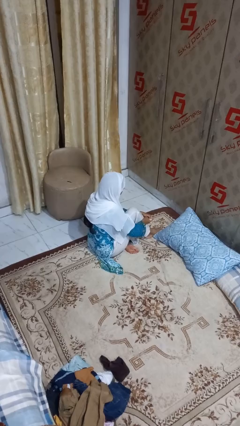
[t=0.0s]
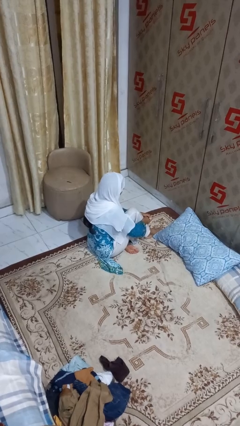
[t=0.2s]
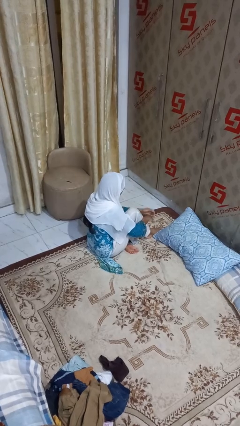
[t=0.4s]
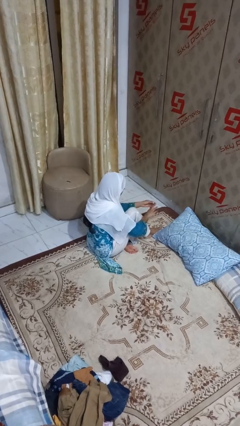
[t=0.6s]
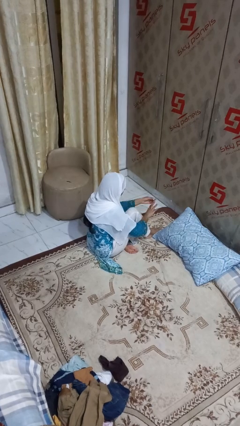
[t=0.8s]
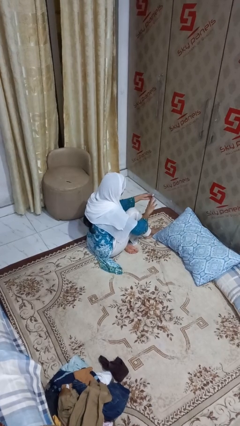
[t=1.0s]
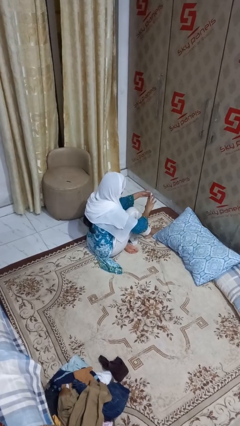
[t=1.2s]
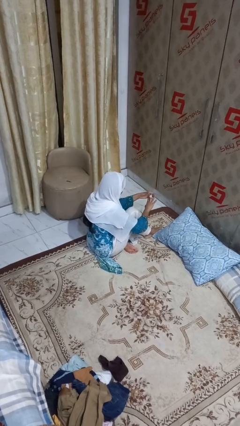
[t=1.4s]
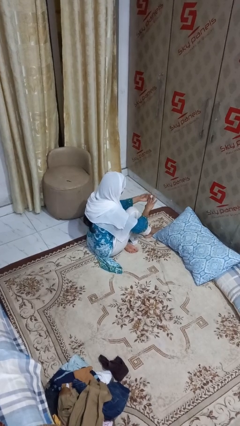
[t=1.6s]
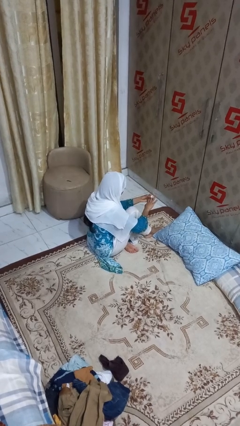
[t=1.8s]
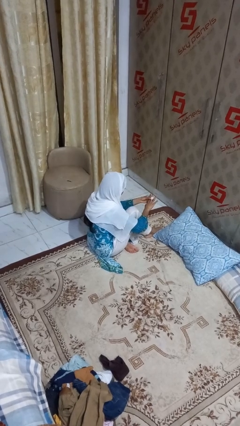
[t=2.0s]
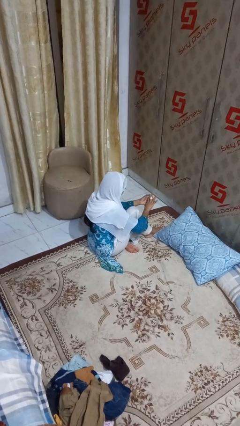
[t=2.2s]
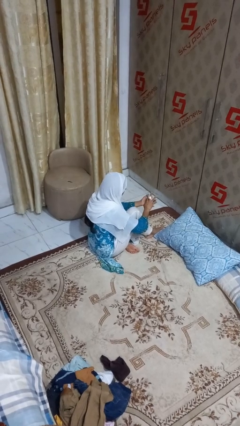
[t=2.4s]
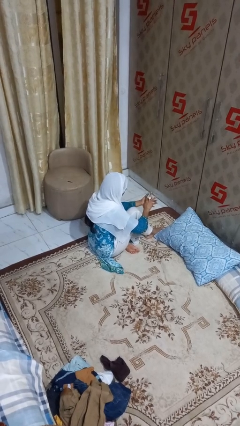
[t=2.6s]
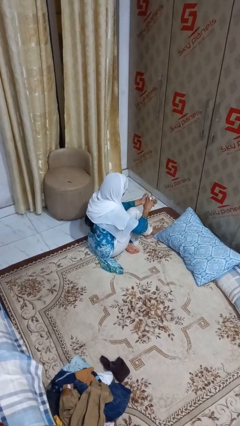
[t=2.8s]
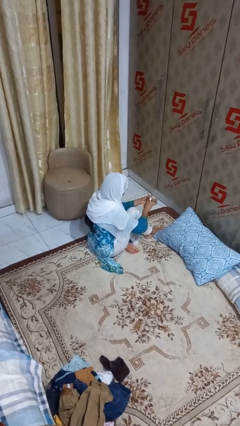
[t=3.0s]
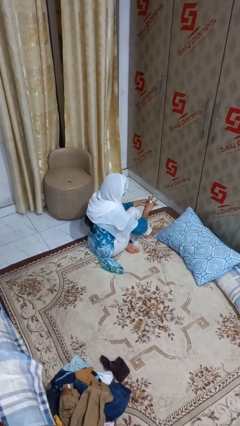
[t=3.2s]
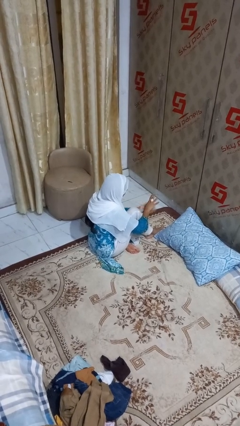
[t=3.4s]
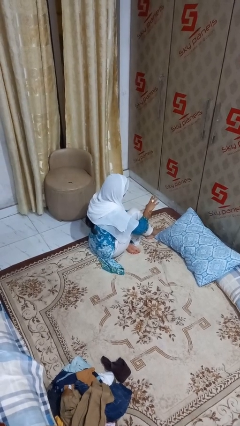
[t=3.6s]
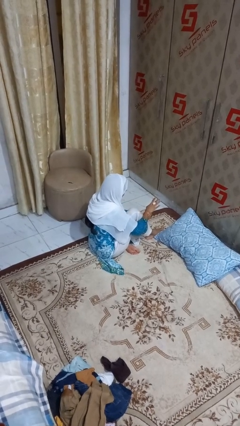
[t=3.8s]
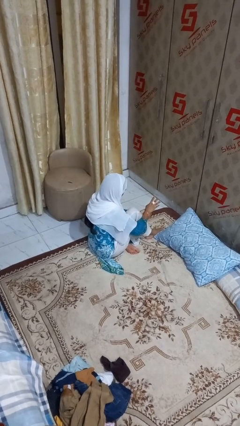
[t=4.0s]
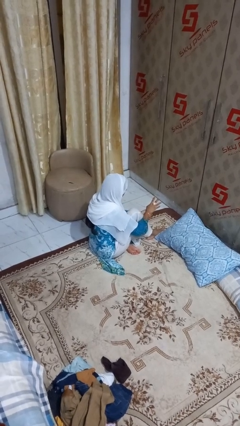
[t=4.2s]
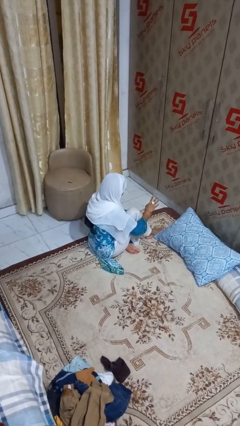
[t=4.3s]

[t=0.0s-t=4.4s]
person puts on ring

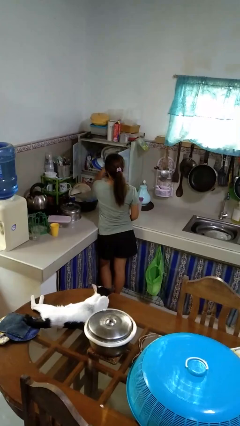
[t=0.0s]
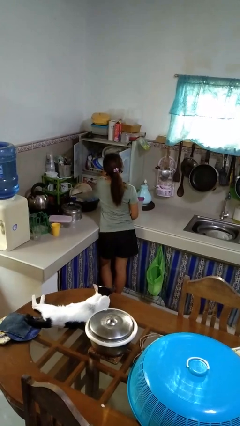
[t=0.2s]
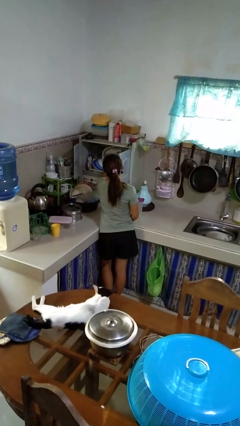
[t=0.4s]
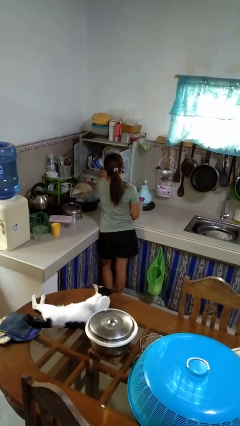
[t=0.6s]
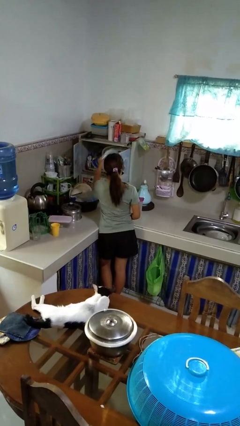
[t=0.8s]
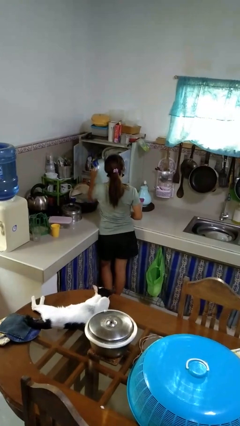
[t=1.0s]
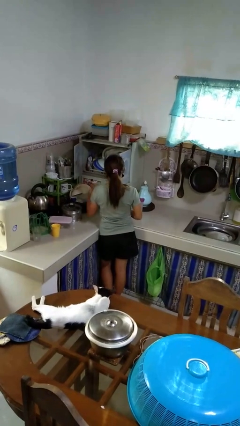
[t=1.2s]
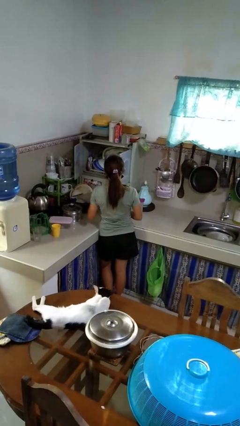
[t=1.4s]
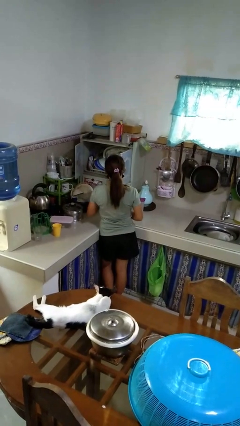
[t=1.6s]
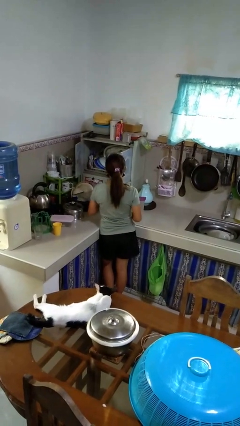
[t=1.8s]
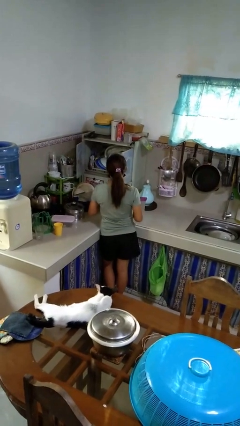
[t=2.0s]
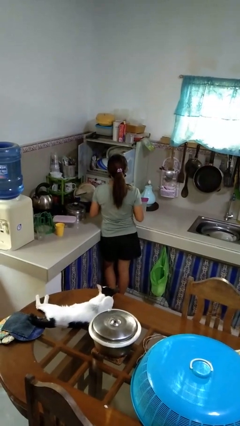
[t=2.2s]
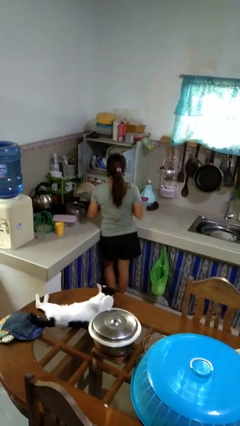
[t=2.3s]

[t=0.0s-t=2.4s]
person takes object from kitchen drawer

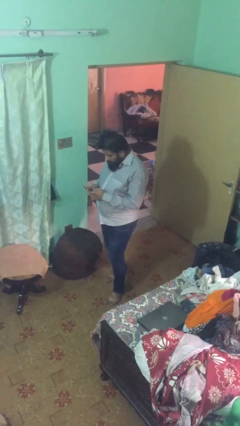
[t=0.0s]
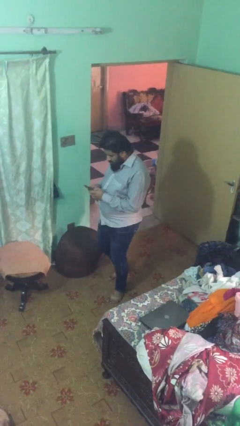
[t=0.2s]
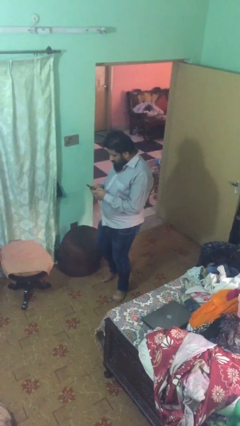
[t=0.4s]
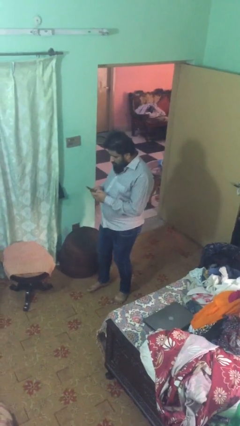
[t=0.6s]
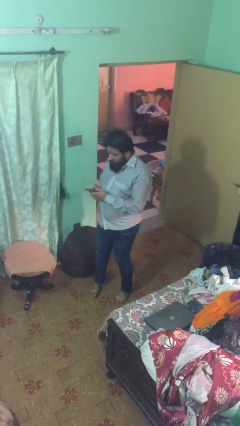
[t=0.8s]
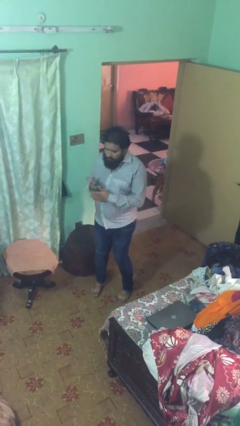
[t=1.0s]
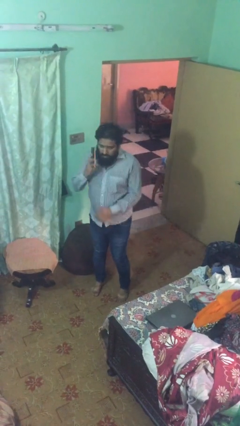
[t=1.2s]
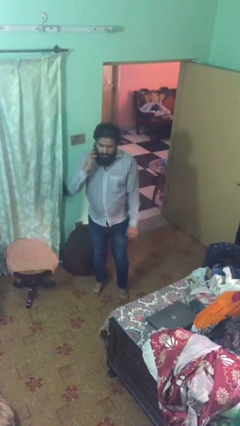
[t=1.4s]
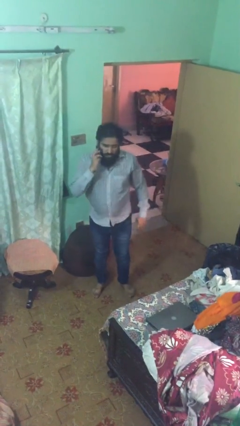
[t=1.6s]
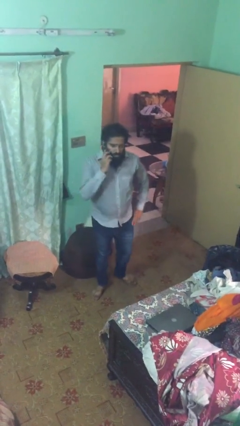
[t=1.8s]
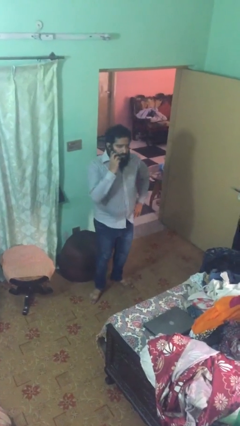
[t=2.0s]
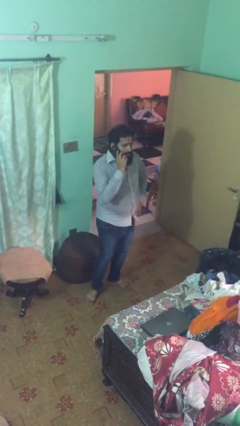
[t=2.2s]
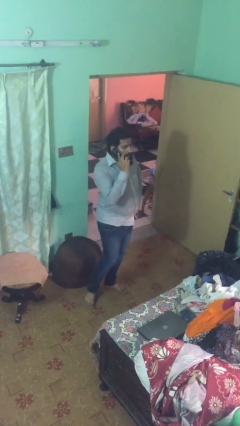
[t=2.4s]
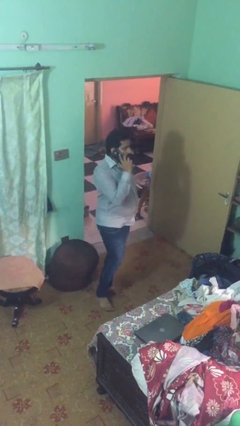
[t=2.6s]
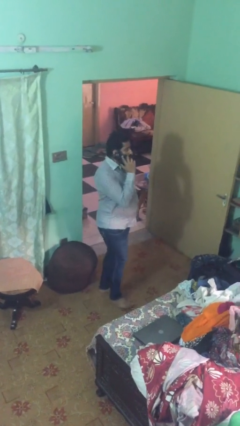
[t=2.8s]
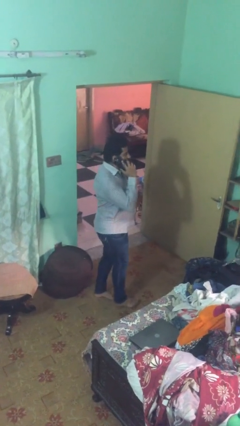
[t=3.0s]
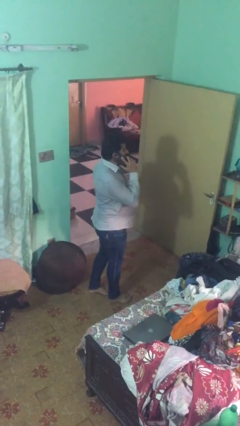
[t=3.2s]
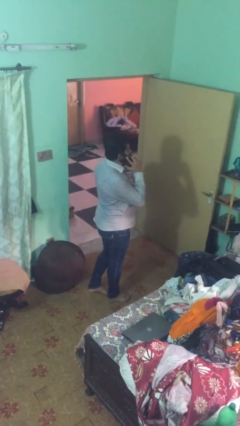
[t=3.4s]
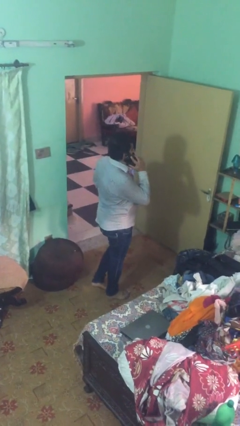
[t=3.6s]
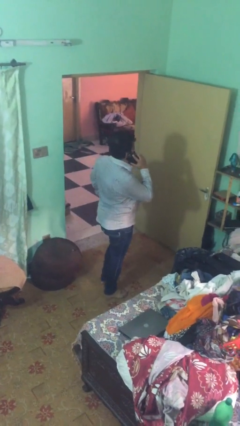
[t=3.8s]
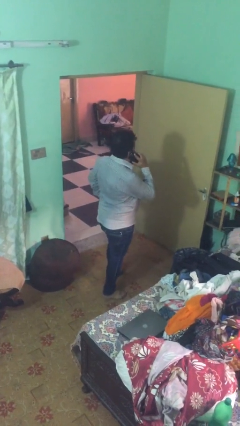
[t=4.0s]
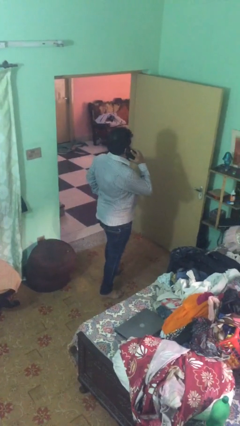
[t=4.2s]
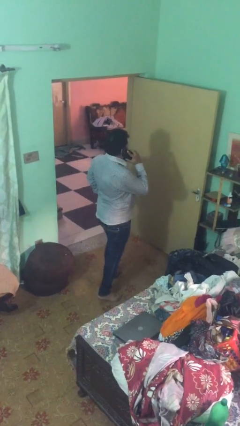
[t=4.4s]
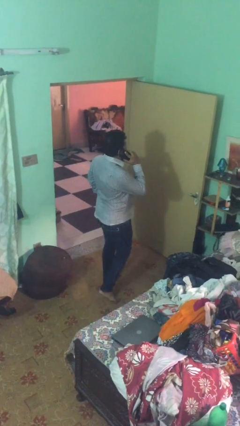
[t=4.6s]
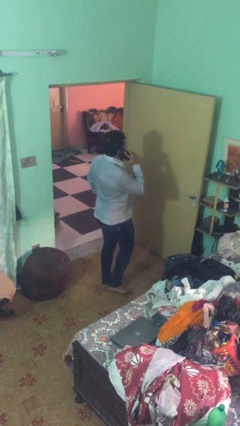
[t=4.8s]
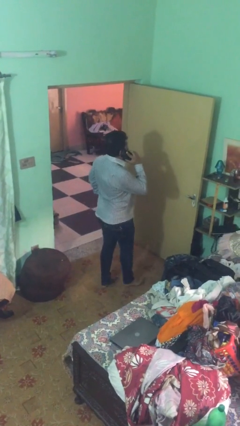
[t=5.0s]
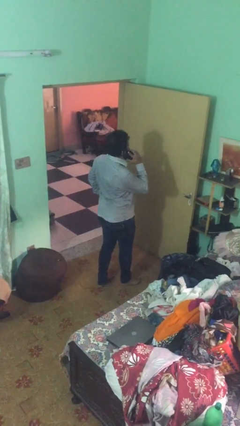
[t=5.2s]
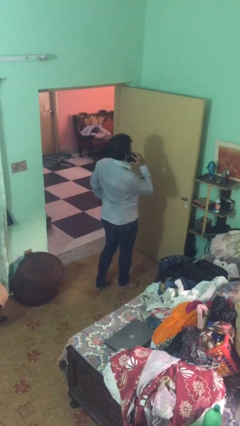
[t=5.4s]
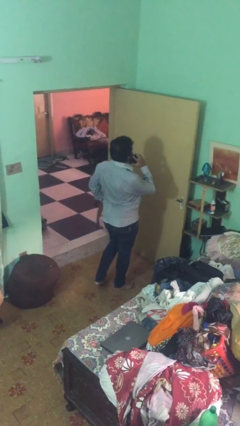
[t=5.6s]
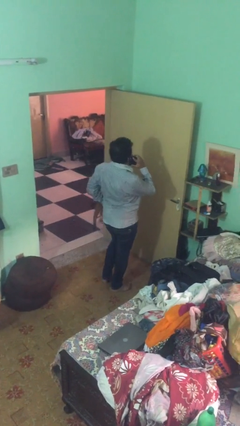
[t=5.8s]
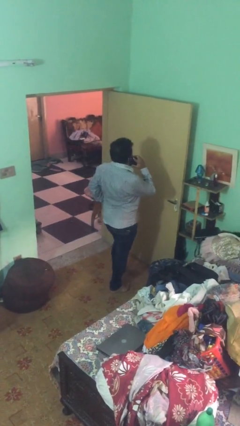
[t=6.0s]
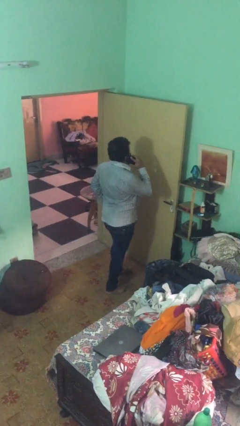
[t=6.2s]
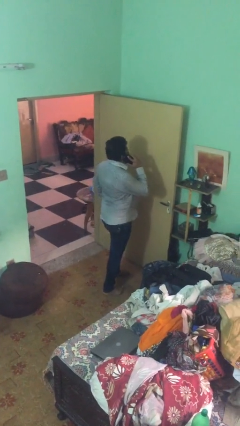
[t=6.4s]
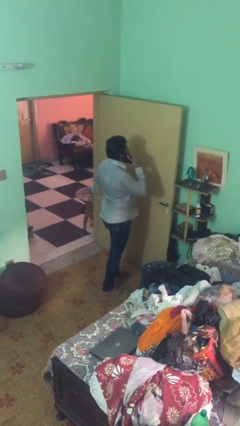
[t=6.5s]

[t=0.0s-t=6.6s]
person talks on phone

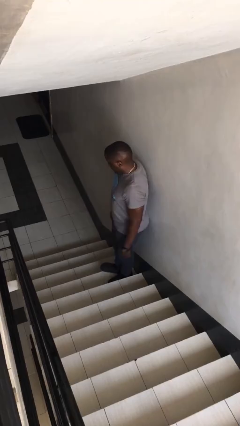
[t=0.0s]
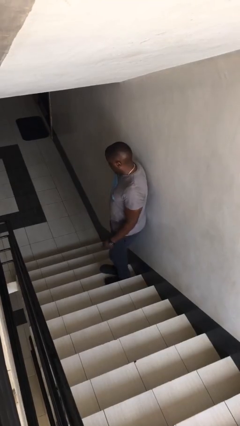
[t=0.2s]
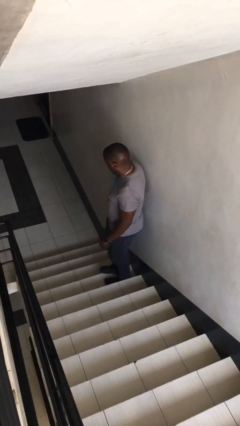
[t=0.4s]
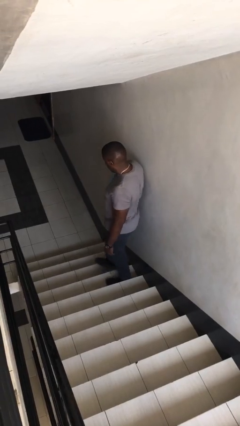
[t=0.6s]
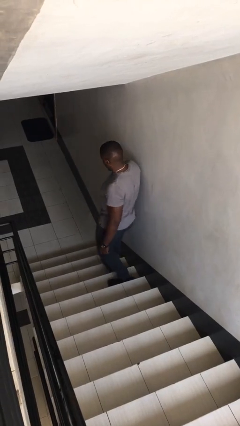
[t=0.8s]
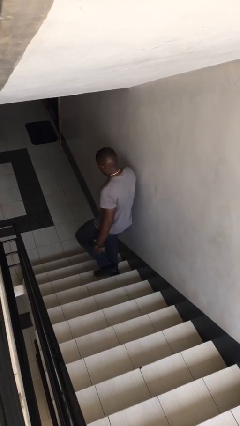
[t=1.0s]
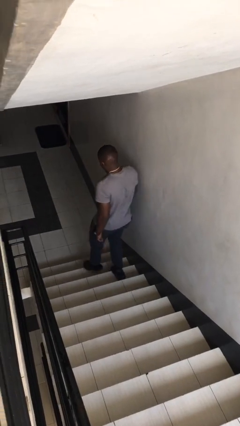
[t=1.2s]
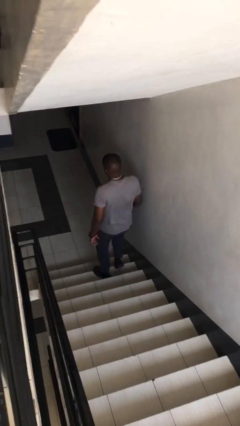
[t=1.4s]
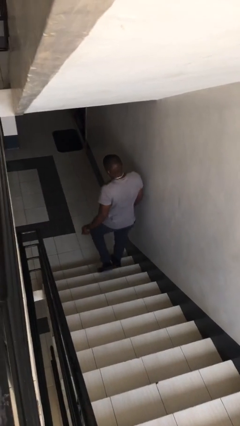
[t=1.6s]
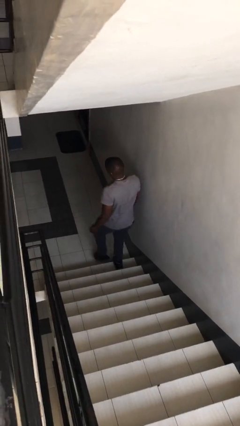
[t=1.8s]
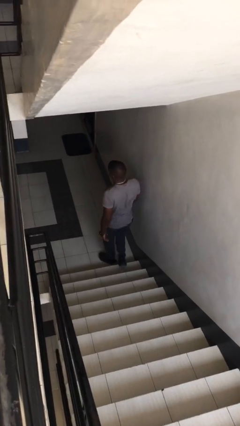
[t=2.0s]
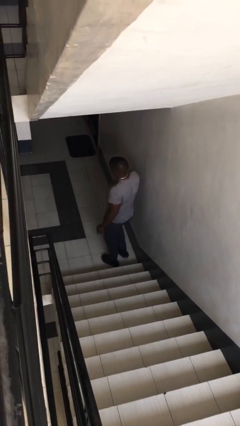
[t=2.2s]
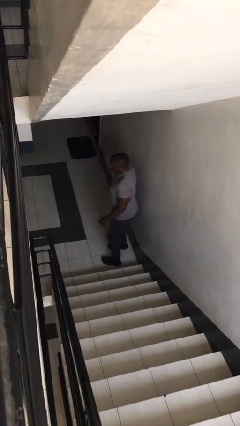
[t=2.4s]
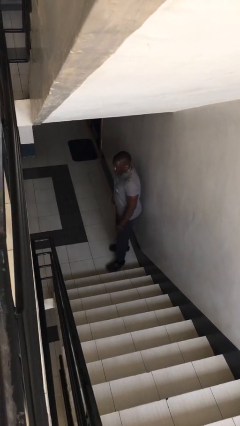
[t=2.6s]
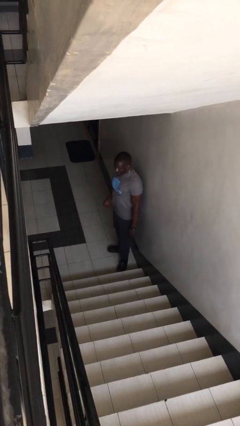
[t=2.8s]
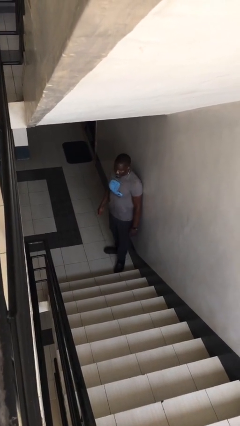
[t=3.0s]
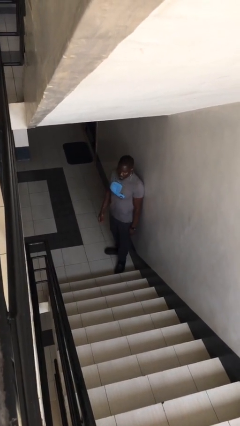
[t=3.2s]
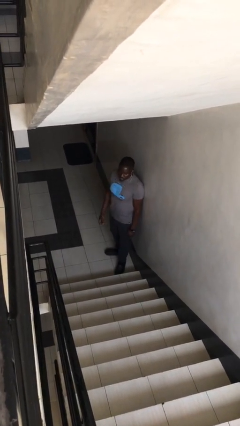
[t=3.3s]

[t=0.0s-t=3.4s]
person climbs down stairs

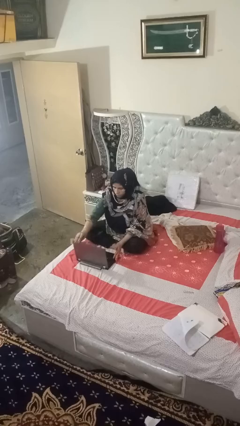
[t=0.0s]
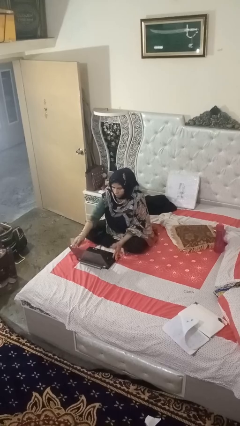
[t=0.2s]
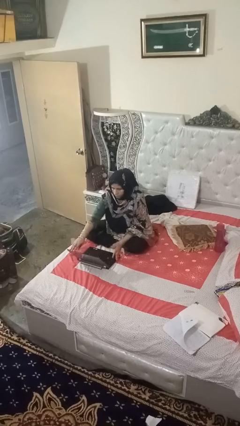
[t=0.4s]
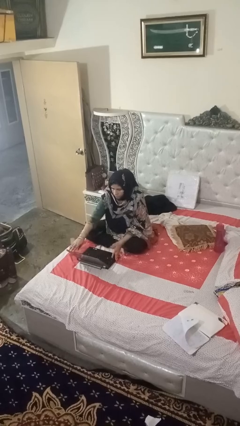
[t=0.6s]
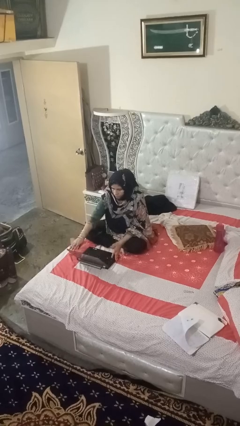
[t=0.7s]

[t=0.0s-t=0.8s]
person closes laptop
